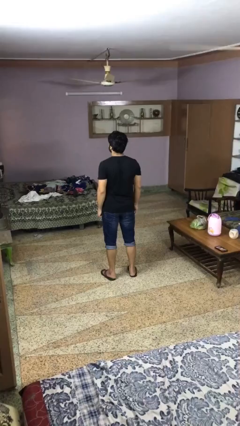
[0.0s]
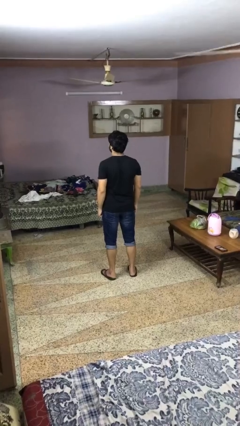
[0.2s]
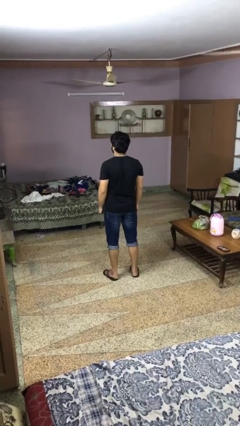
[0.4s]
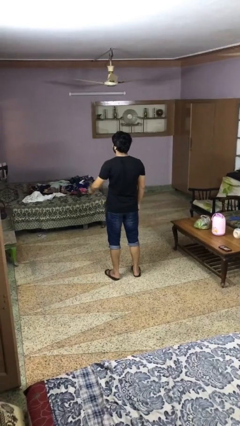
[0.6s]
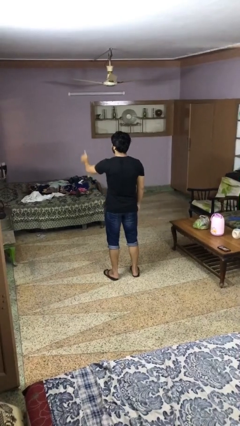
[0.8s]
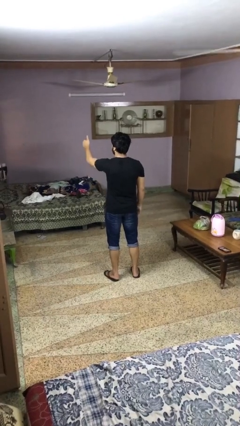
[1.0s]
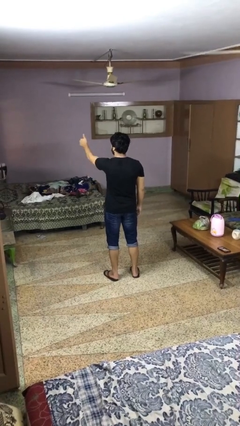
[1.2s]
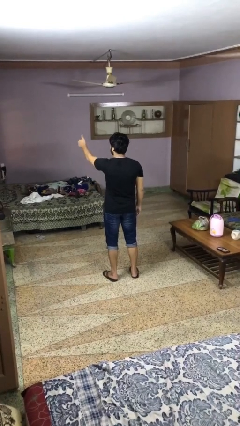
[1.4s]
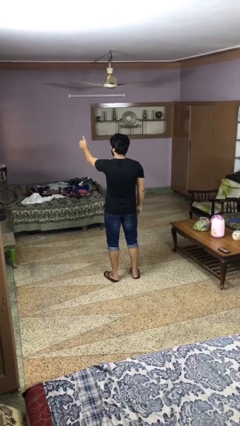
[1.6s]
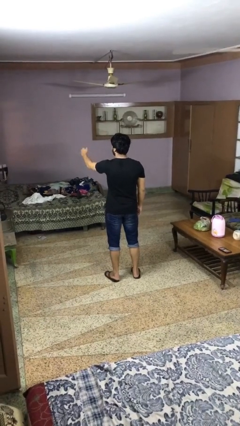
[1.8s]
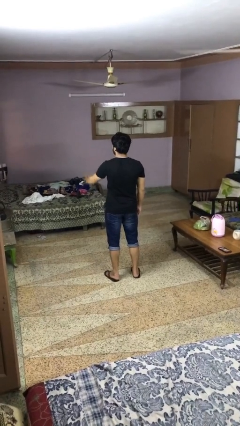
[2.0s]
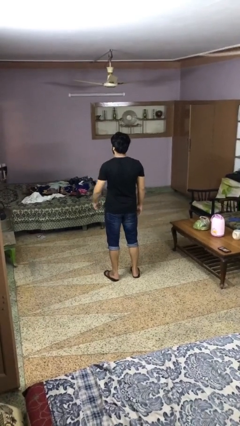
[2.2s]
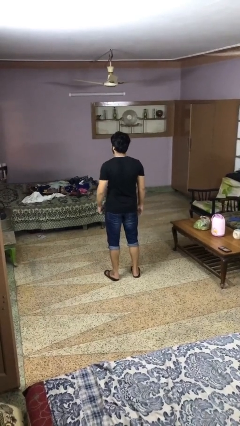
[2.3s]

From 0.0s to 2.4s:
person gestures thumbs up

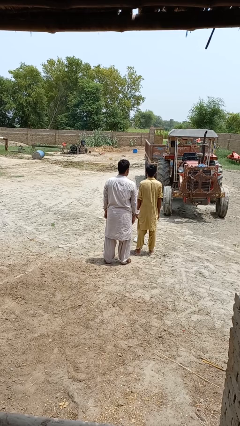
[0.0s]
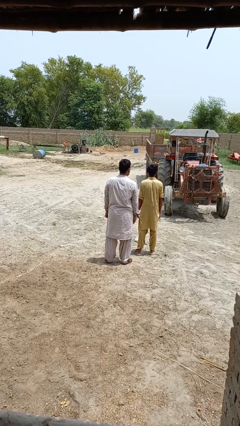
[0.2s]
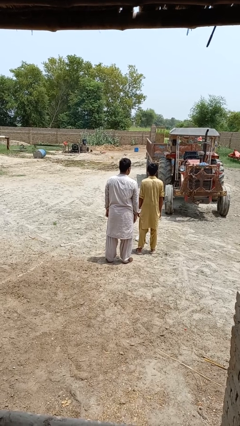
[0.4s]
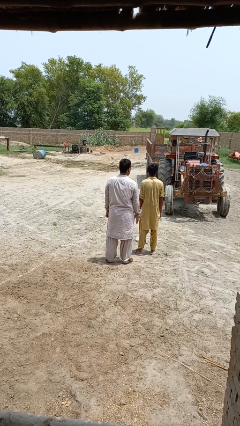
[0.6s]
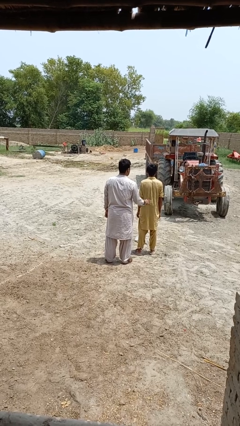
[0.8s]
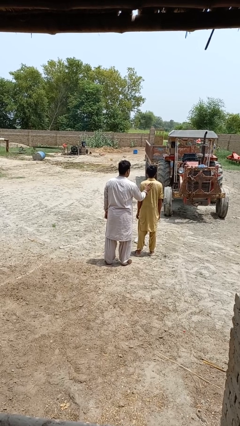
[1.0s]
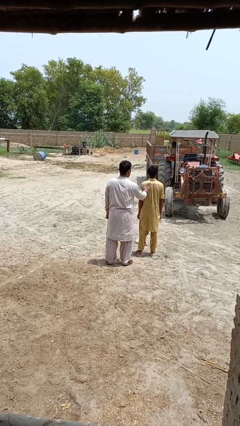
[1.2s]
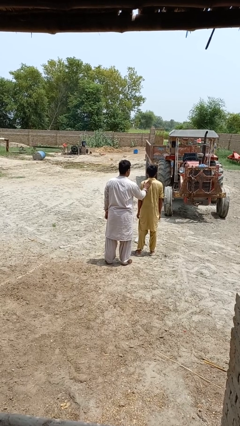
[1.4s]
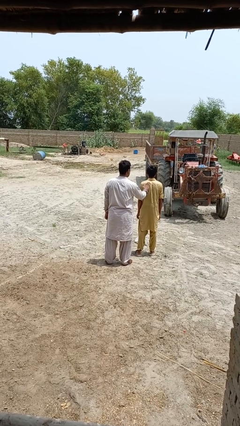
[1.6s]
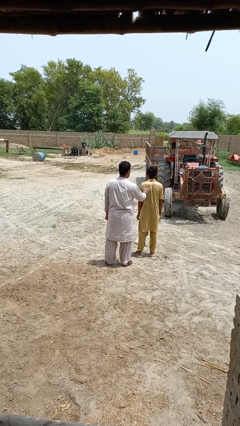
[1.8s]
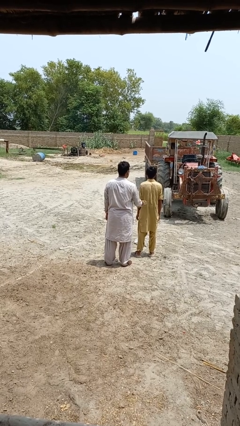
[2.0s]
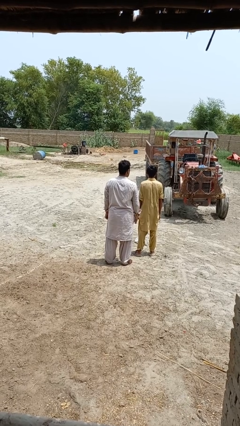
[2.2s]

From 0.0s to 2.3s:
person touches back of person

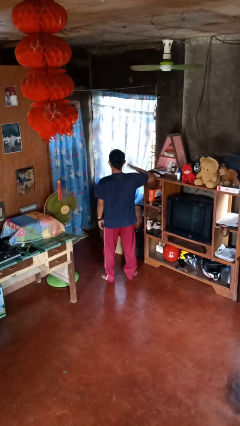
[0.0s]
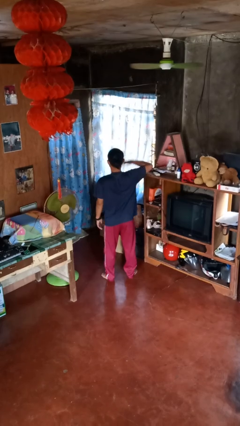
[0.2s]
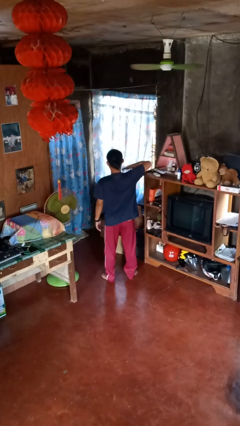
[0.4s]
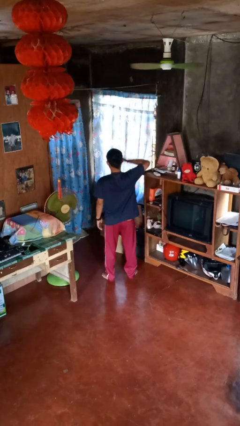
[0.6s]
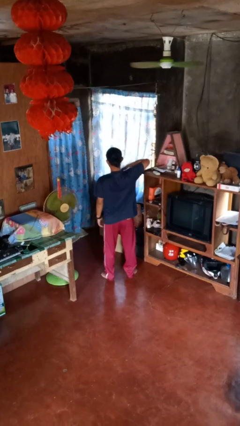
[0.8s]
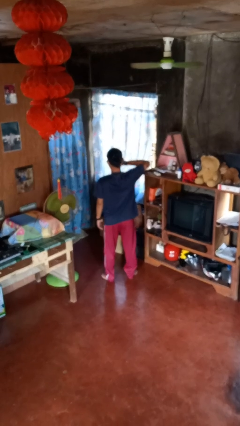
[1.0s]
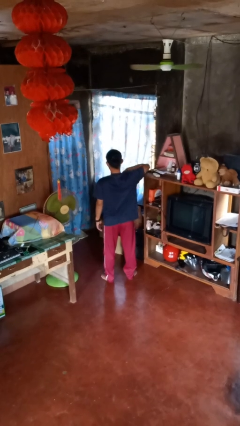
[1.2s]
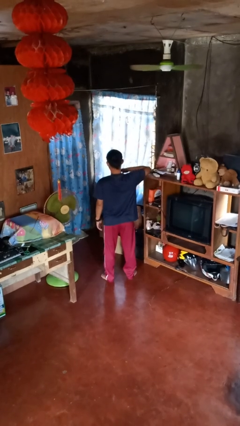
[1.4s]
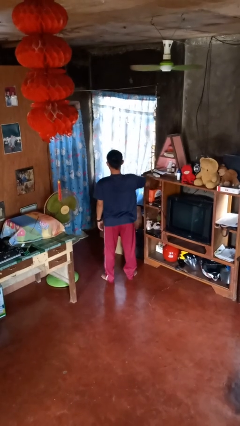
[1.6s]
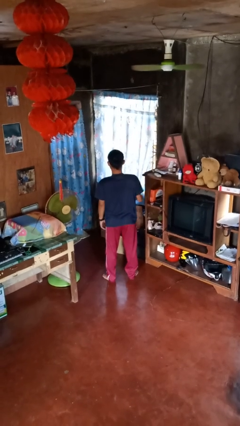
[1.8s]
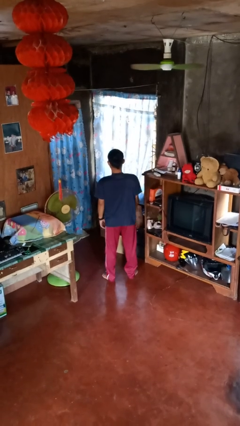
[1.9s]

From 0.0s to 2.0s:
person drums on chest

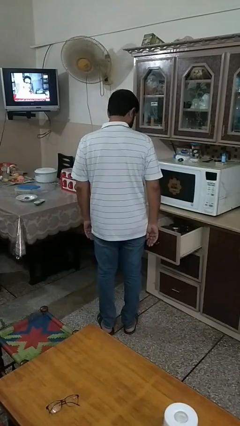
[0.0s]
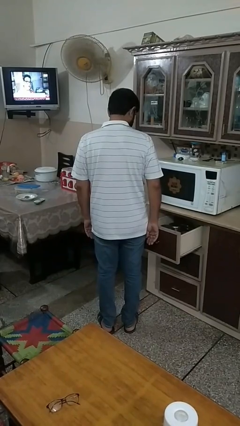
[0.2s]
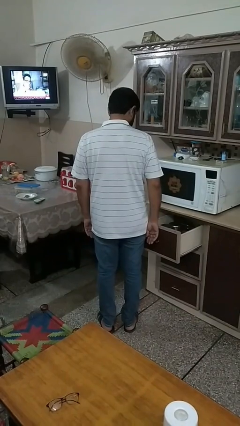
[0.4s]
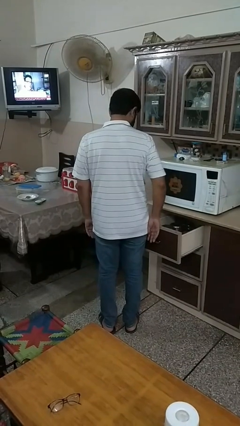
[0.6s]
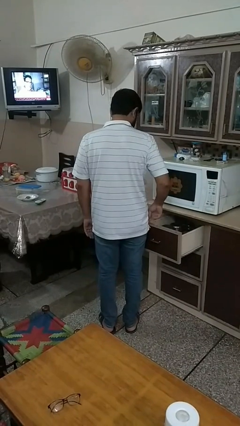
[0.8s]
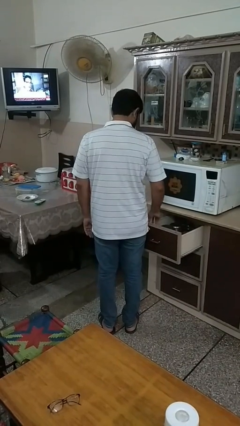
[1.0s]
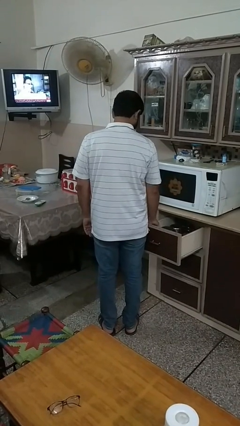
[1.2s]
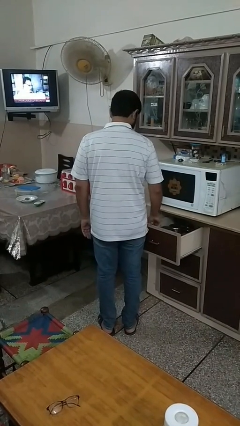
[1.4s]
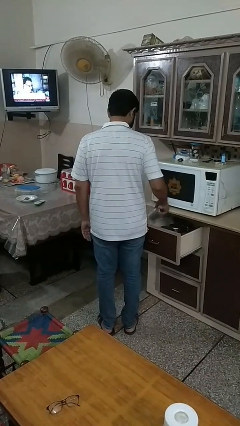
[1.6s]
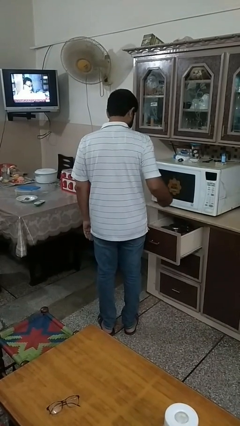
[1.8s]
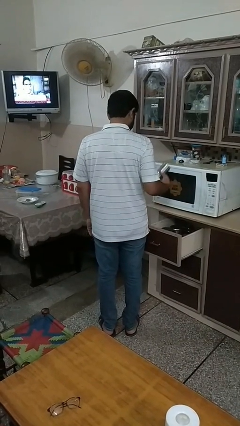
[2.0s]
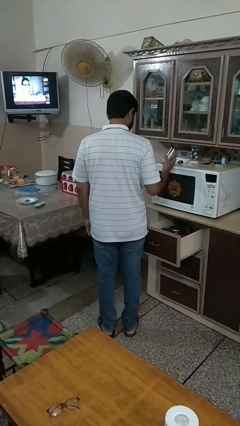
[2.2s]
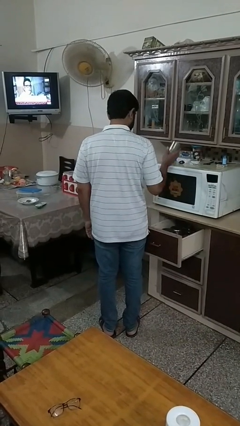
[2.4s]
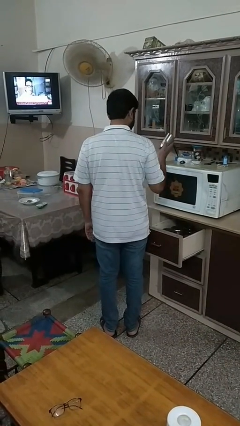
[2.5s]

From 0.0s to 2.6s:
person takes object from kitchen drawer

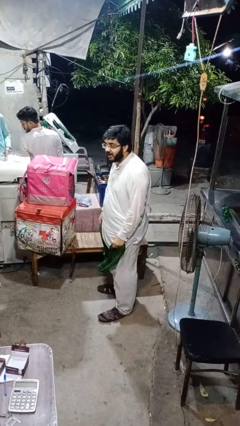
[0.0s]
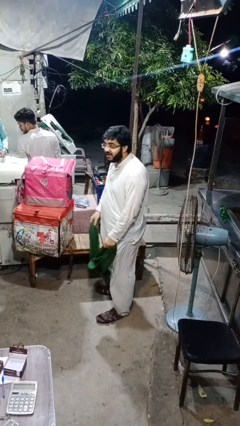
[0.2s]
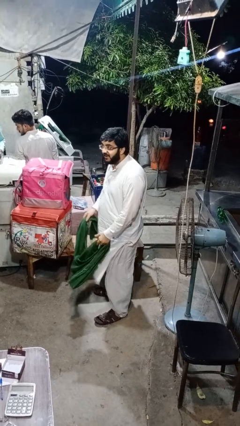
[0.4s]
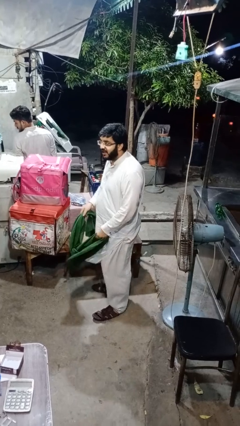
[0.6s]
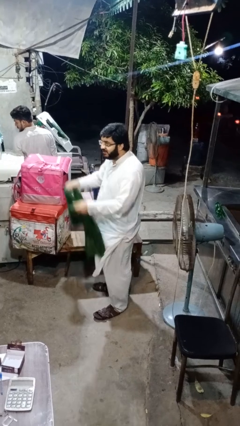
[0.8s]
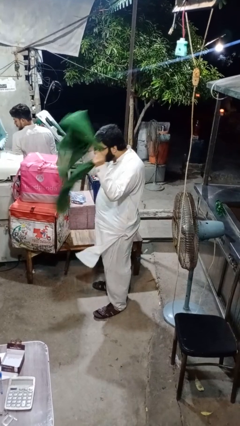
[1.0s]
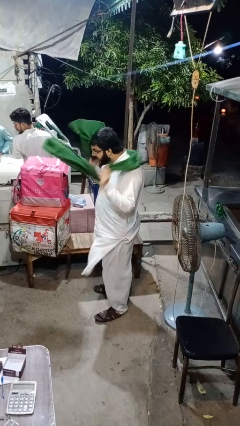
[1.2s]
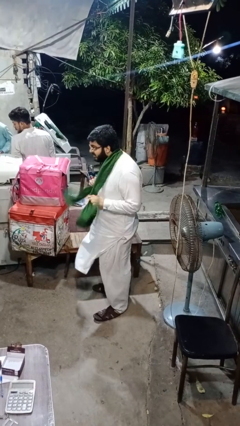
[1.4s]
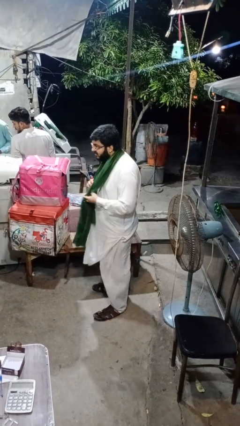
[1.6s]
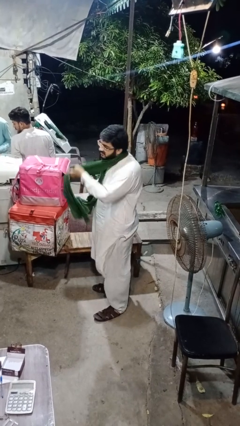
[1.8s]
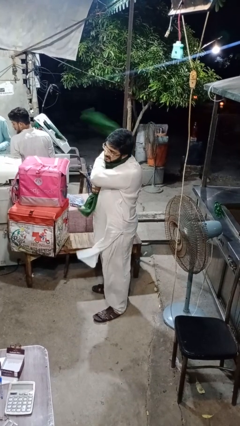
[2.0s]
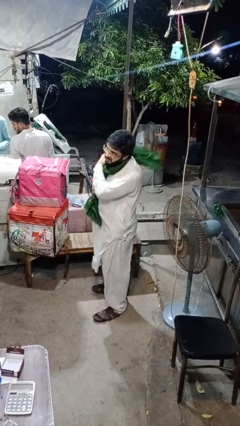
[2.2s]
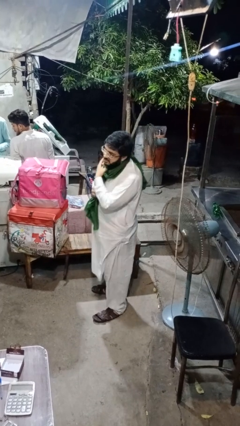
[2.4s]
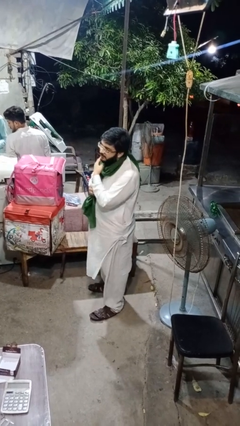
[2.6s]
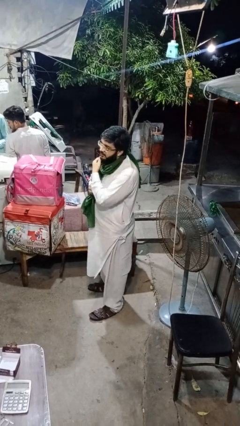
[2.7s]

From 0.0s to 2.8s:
person puts on scarf

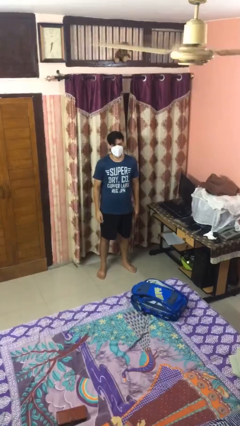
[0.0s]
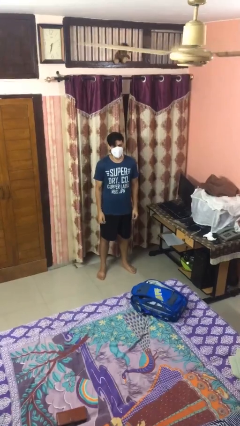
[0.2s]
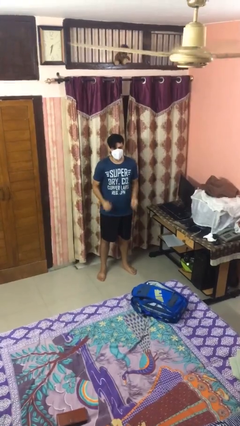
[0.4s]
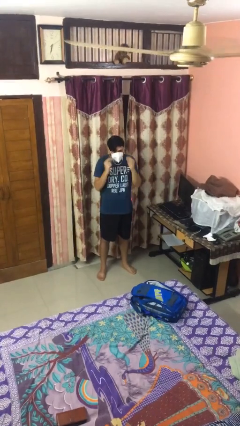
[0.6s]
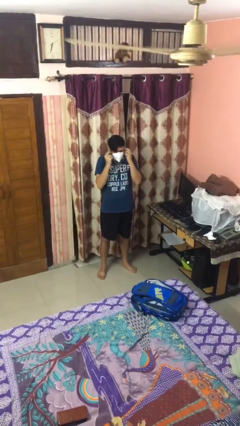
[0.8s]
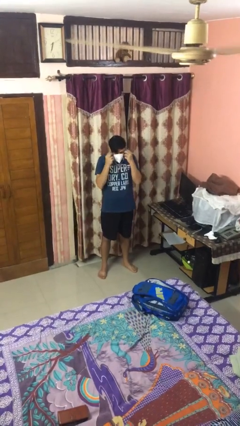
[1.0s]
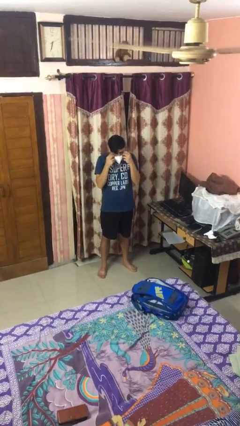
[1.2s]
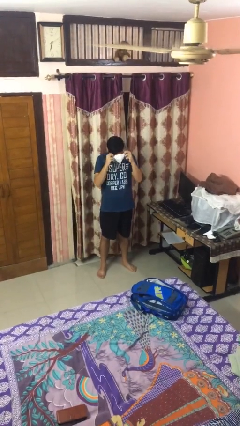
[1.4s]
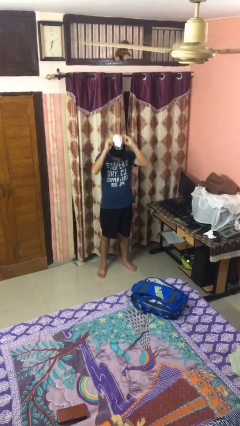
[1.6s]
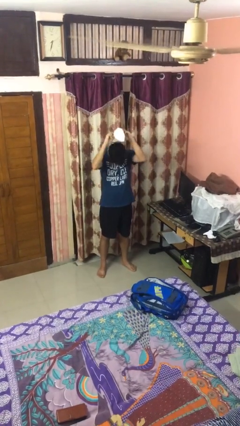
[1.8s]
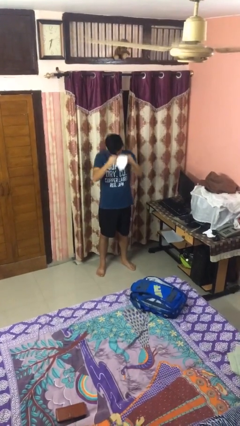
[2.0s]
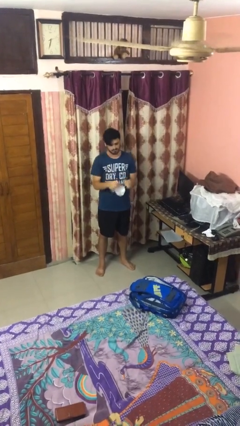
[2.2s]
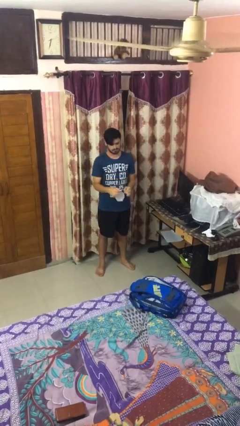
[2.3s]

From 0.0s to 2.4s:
person takes off facemask

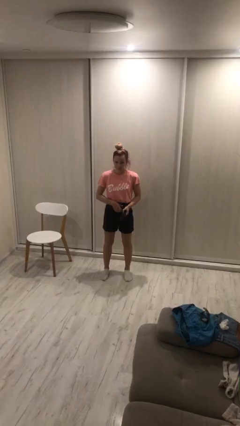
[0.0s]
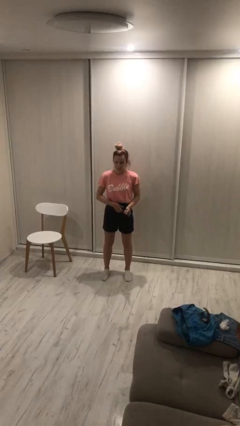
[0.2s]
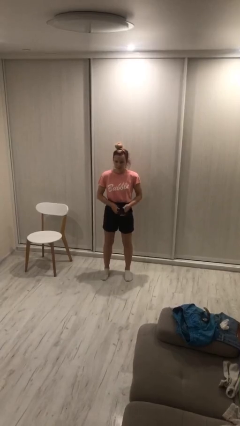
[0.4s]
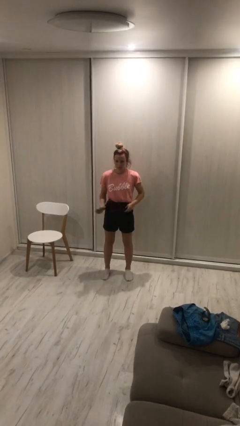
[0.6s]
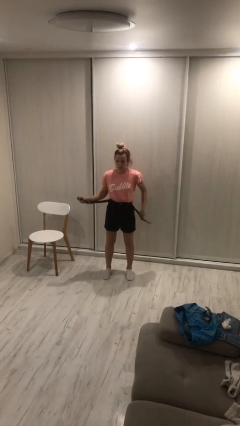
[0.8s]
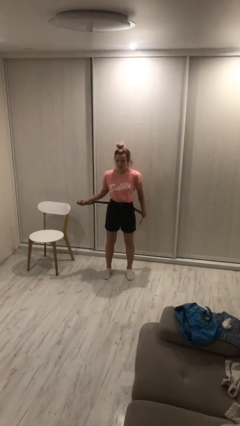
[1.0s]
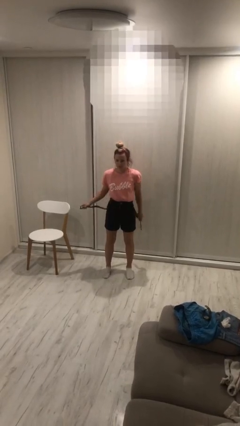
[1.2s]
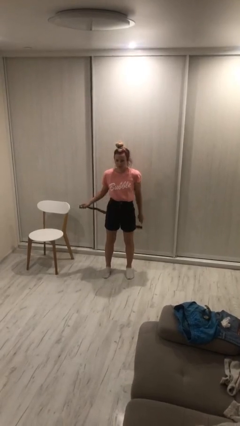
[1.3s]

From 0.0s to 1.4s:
person takes off belt

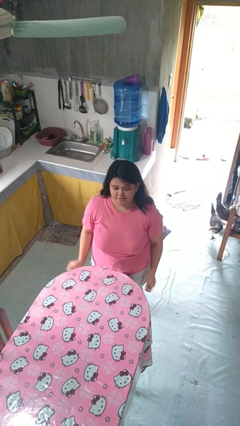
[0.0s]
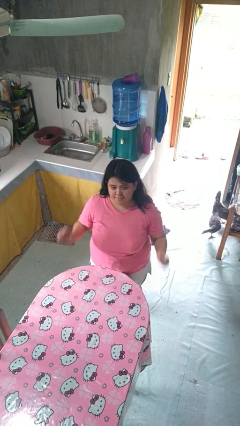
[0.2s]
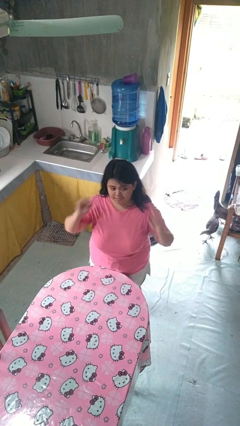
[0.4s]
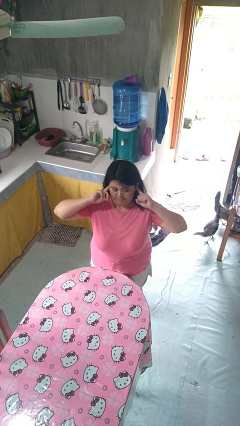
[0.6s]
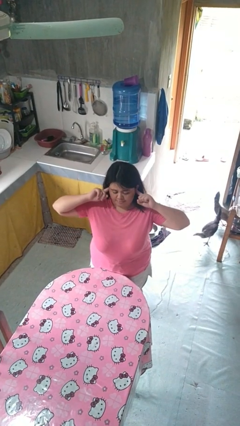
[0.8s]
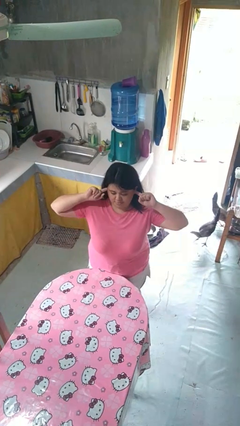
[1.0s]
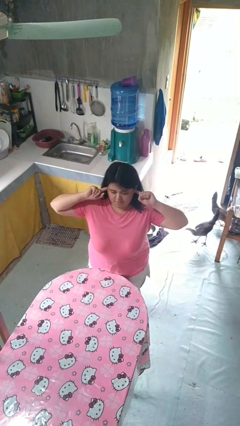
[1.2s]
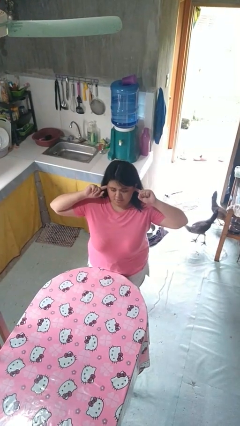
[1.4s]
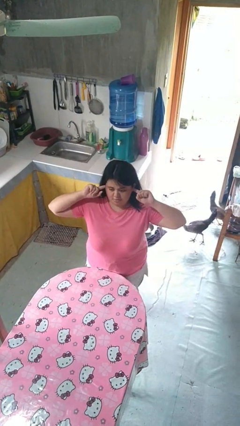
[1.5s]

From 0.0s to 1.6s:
person puts fingers in ear
